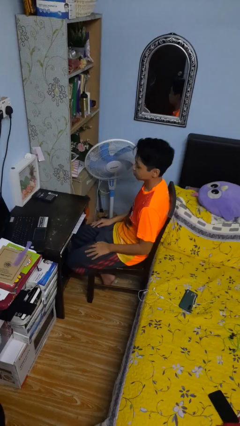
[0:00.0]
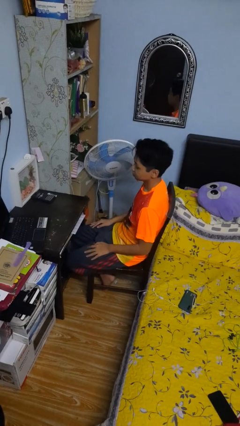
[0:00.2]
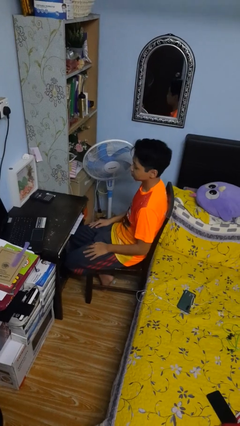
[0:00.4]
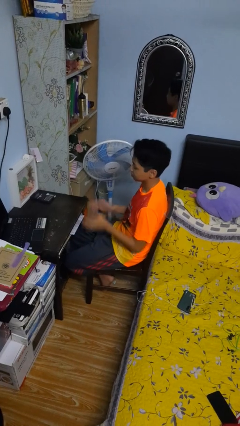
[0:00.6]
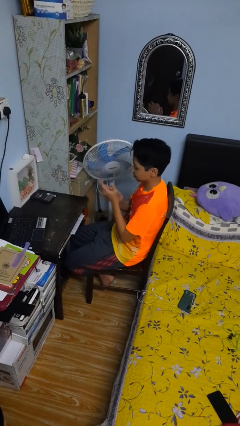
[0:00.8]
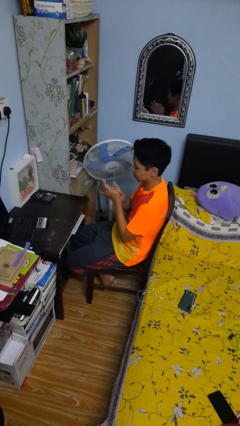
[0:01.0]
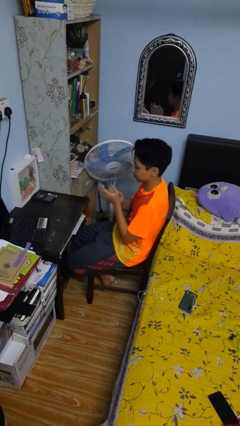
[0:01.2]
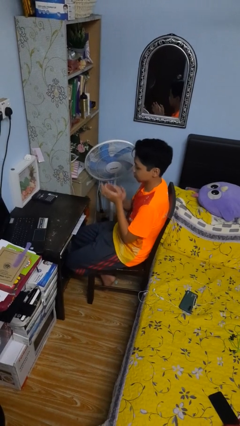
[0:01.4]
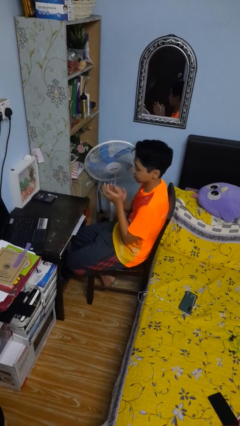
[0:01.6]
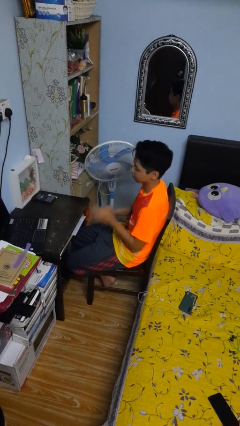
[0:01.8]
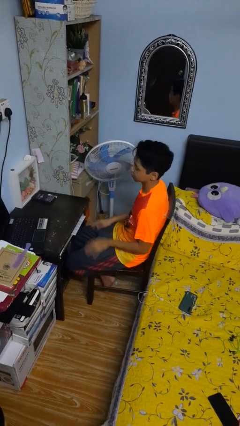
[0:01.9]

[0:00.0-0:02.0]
person claps hands

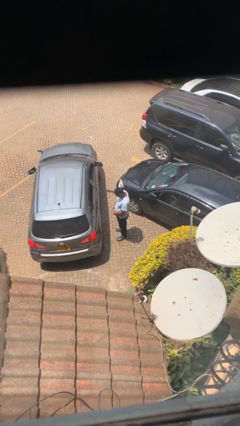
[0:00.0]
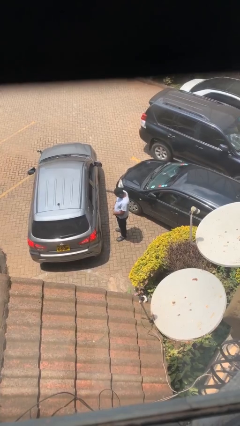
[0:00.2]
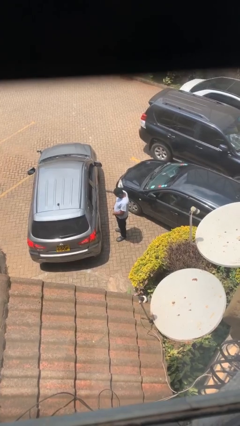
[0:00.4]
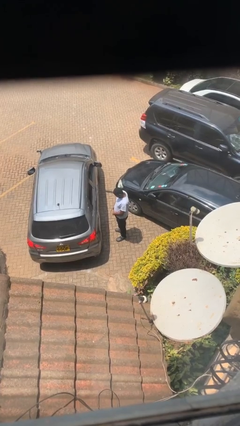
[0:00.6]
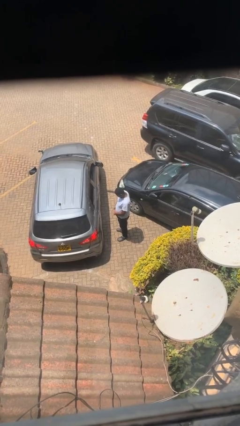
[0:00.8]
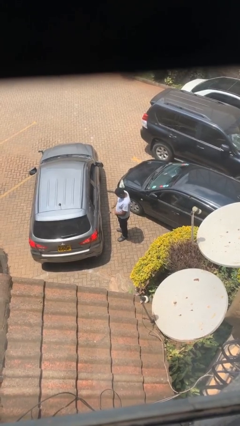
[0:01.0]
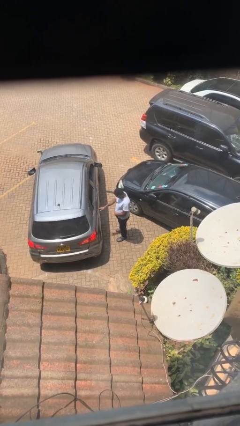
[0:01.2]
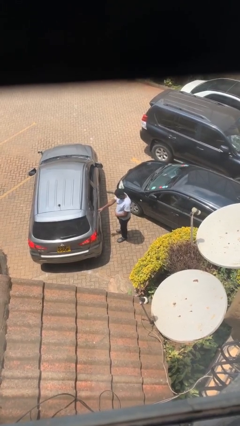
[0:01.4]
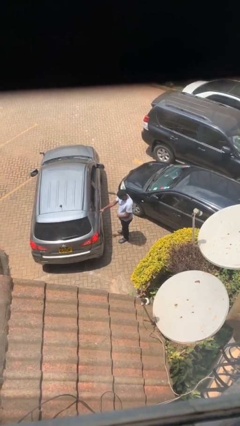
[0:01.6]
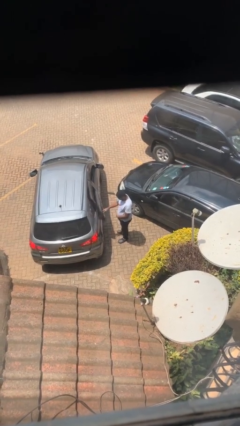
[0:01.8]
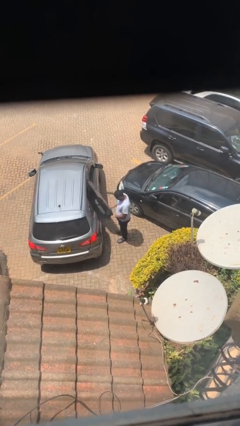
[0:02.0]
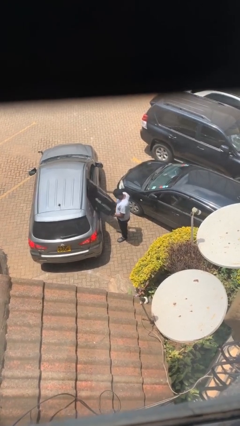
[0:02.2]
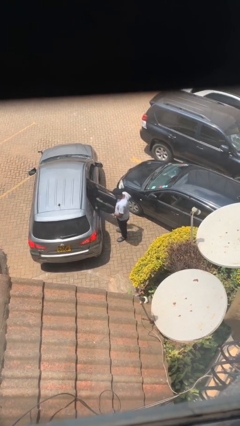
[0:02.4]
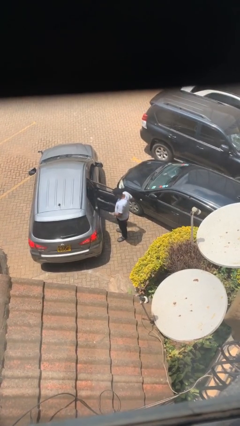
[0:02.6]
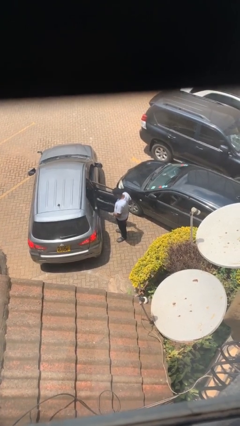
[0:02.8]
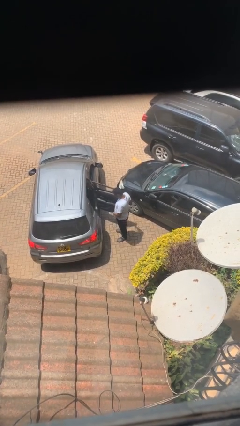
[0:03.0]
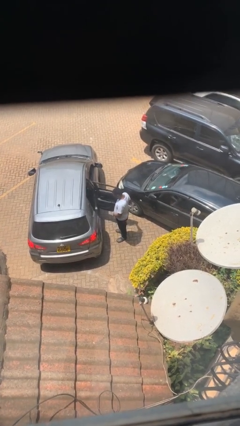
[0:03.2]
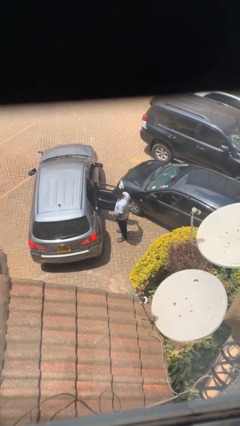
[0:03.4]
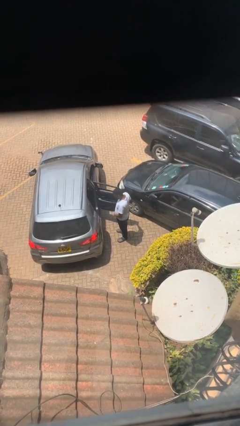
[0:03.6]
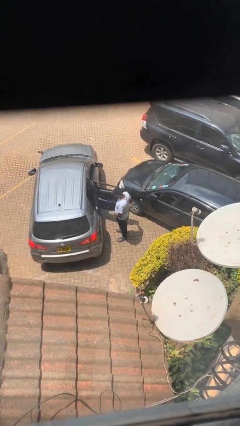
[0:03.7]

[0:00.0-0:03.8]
person opens car door

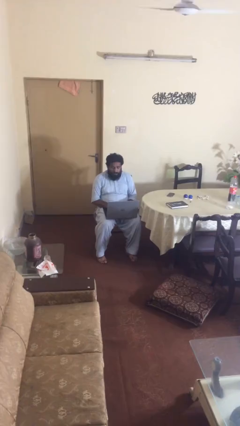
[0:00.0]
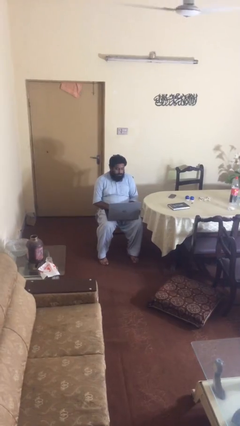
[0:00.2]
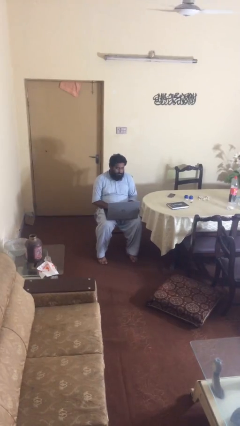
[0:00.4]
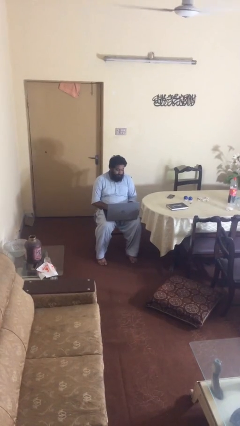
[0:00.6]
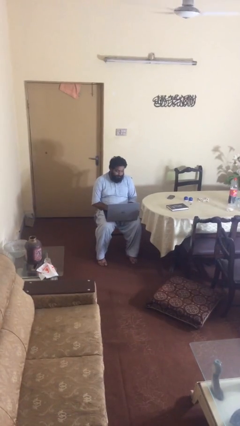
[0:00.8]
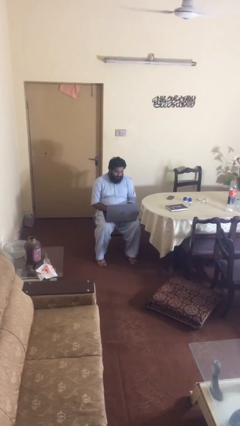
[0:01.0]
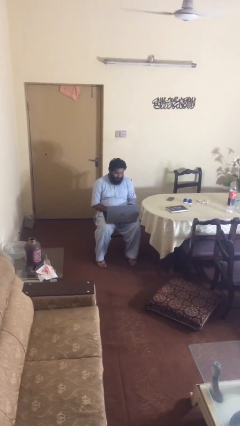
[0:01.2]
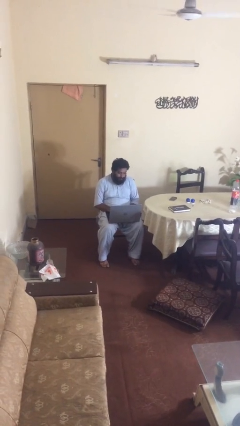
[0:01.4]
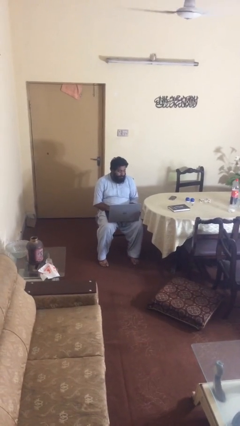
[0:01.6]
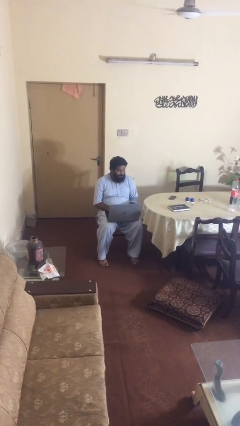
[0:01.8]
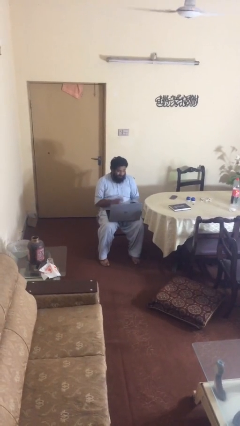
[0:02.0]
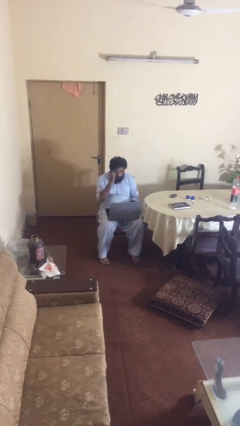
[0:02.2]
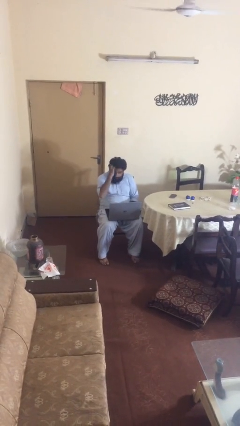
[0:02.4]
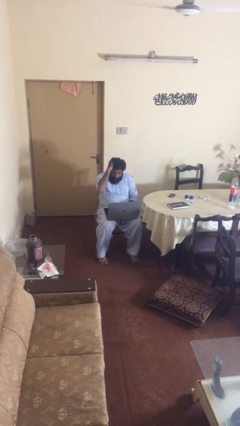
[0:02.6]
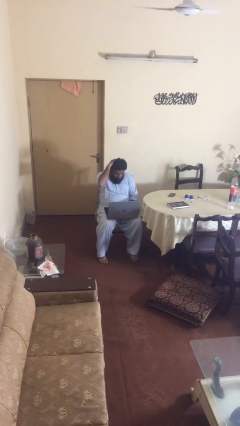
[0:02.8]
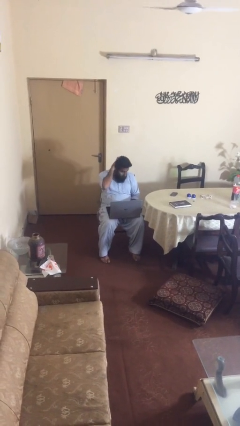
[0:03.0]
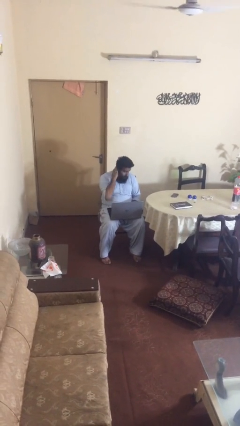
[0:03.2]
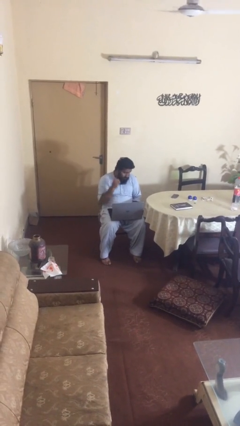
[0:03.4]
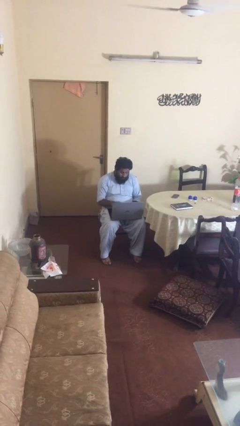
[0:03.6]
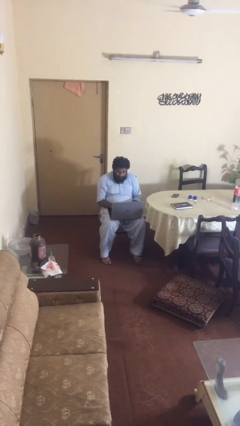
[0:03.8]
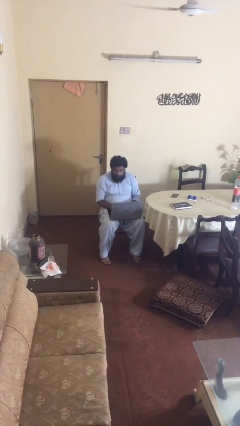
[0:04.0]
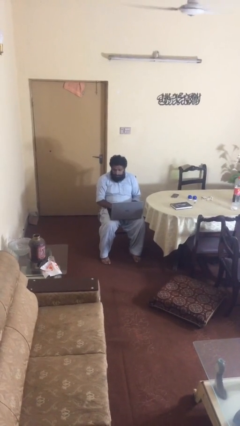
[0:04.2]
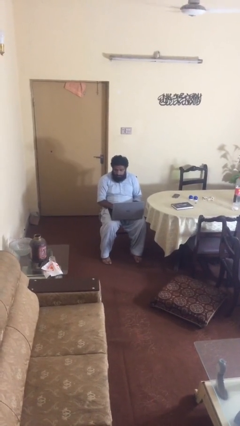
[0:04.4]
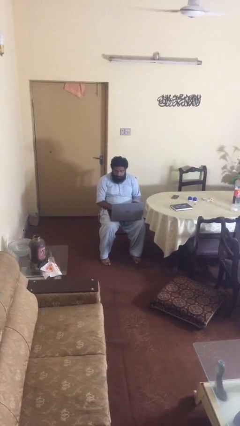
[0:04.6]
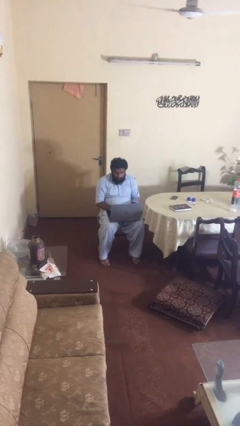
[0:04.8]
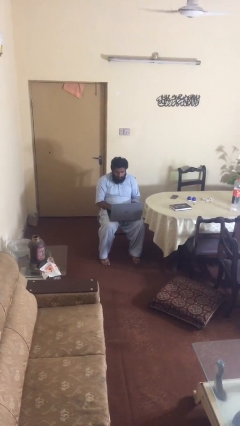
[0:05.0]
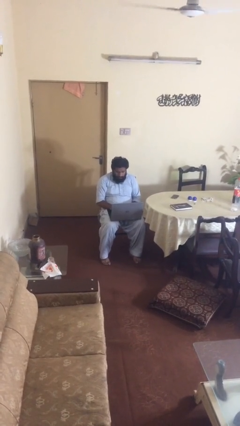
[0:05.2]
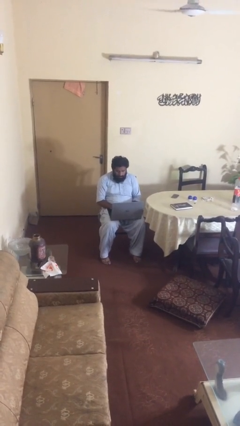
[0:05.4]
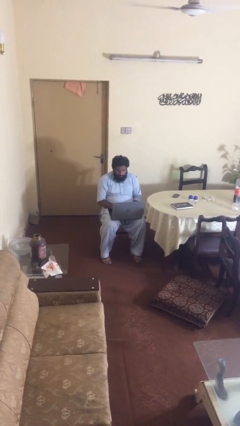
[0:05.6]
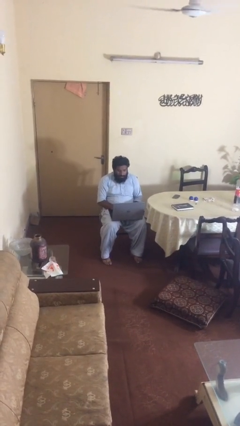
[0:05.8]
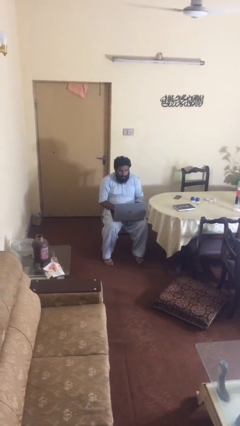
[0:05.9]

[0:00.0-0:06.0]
person interacts with laptop

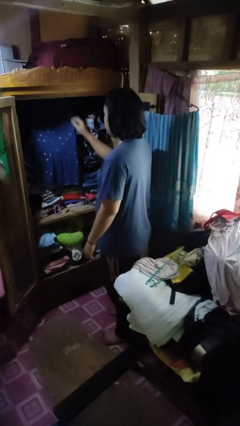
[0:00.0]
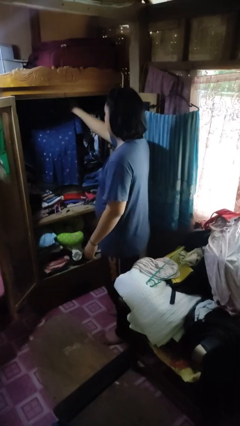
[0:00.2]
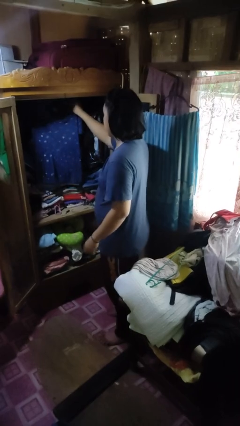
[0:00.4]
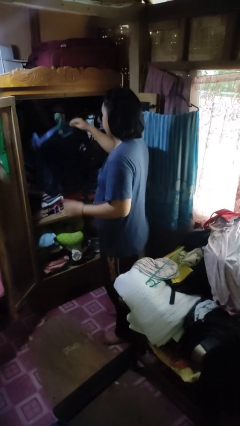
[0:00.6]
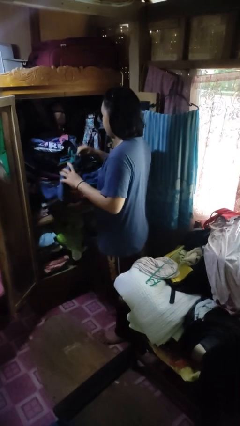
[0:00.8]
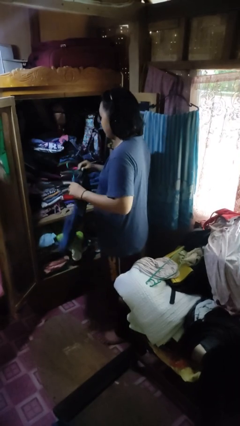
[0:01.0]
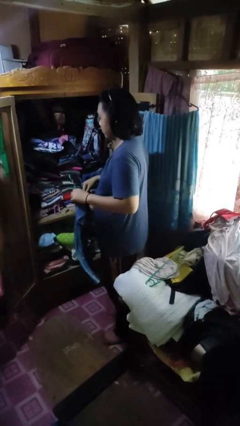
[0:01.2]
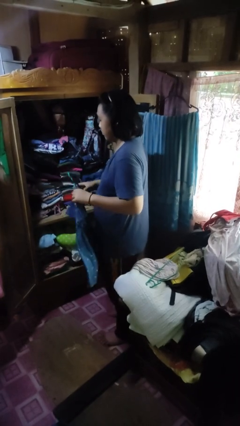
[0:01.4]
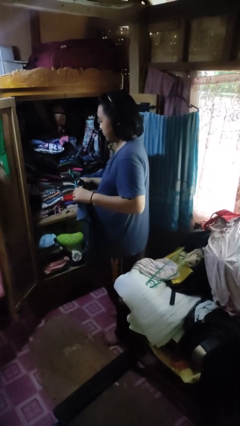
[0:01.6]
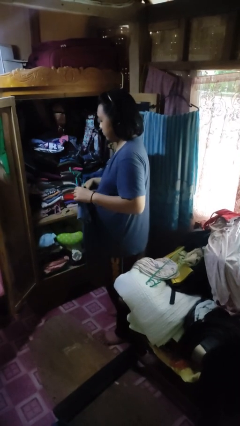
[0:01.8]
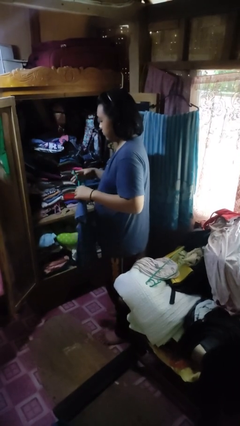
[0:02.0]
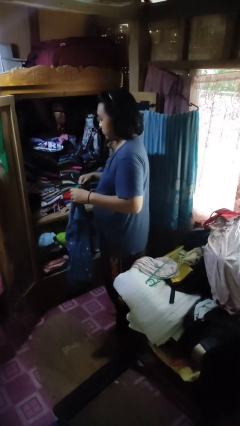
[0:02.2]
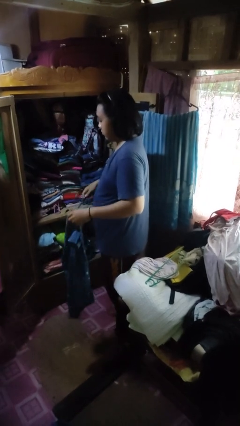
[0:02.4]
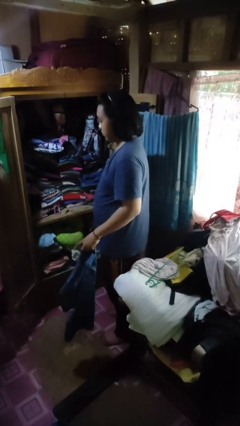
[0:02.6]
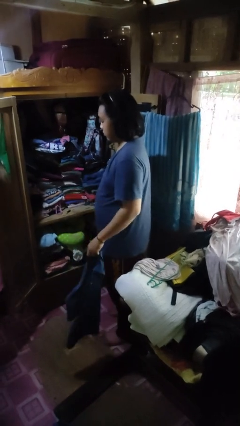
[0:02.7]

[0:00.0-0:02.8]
person takes clothes from closet

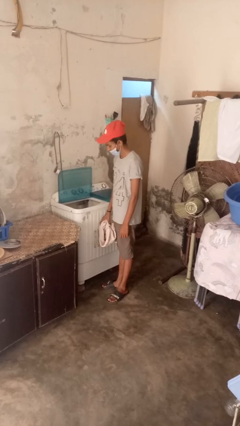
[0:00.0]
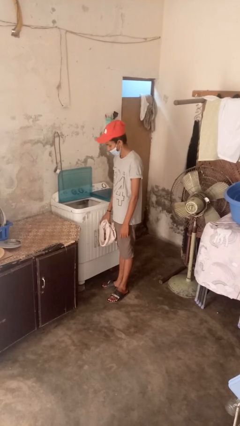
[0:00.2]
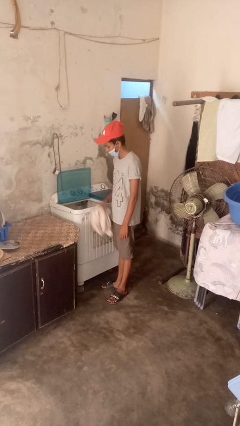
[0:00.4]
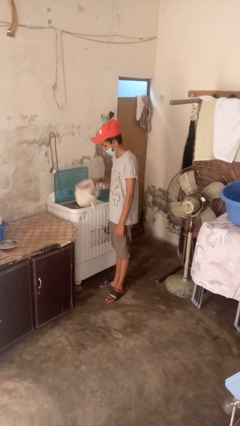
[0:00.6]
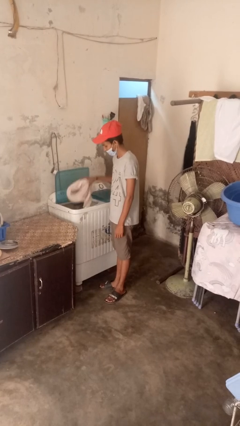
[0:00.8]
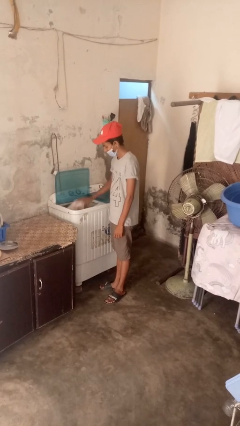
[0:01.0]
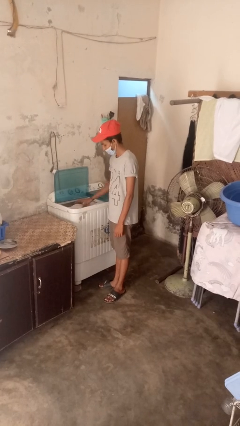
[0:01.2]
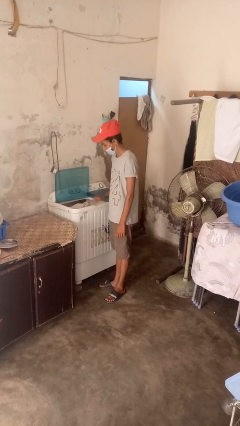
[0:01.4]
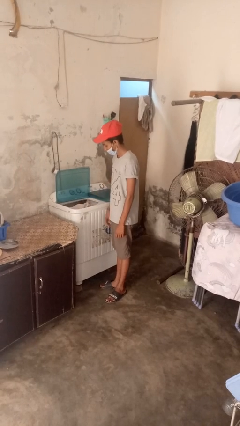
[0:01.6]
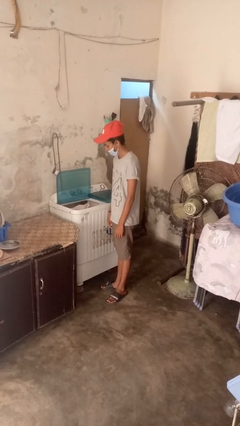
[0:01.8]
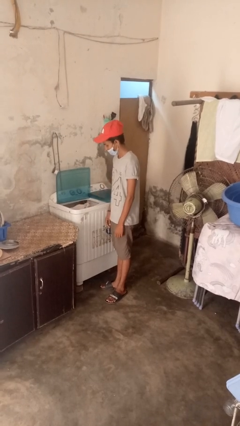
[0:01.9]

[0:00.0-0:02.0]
person loads dryer

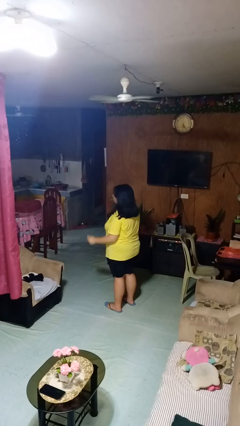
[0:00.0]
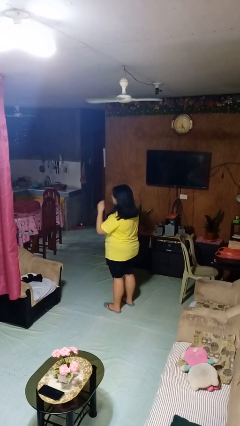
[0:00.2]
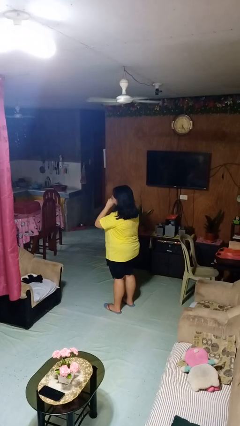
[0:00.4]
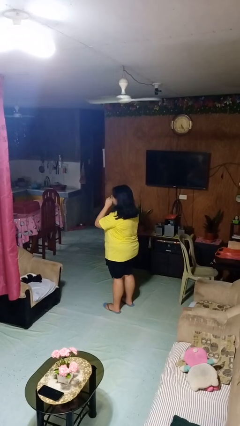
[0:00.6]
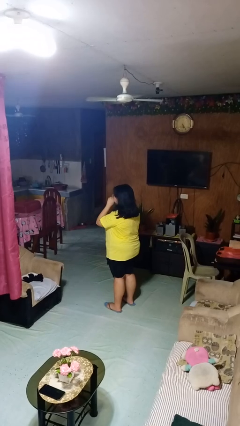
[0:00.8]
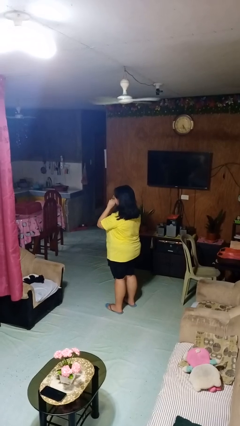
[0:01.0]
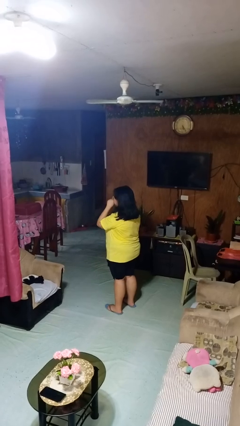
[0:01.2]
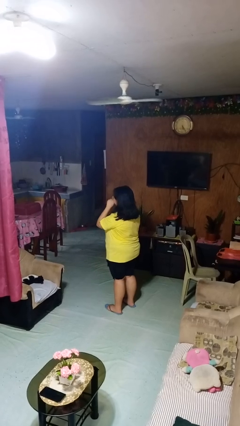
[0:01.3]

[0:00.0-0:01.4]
person scratches face
